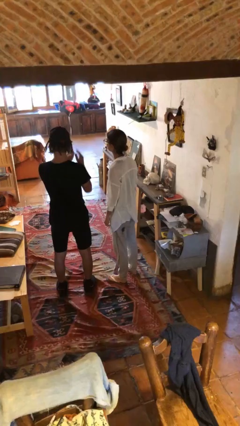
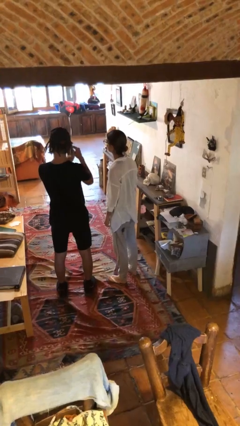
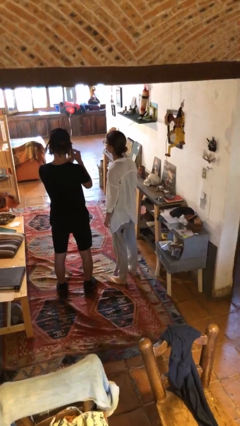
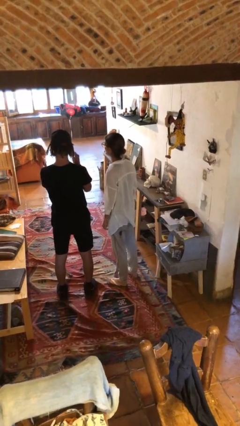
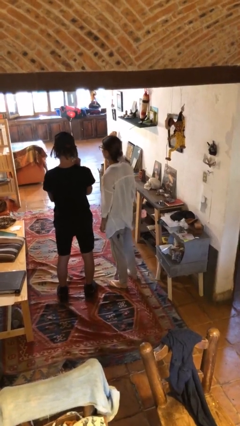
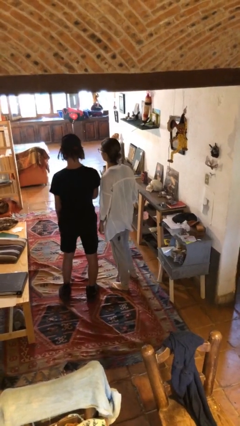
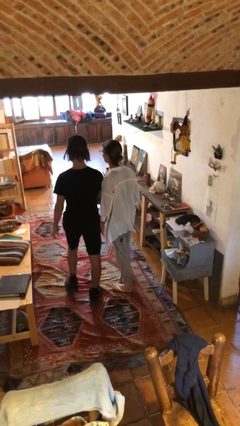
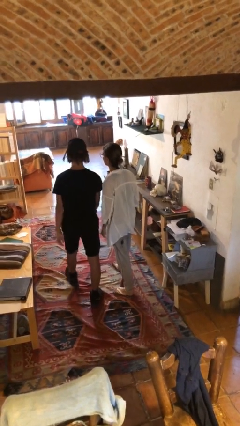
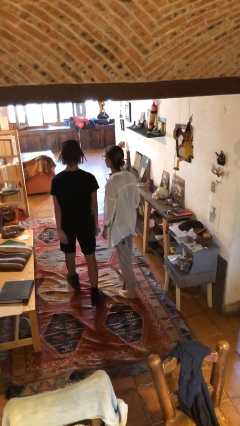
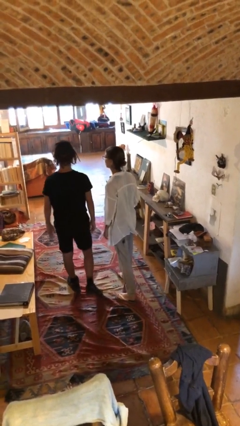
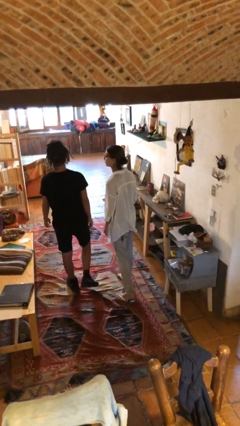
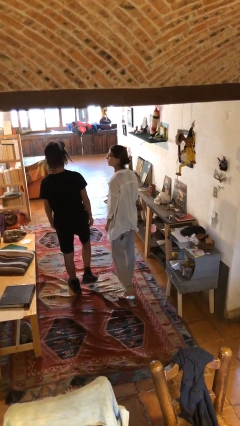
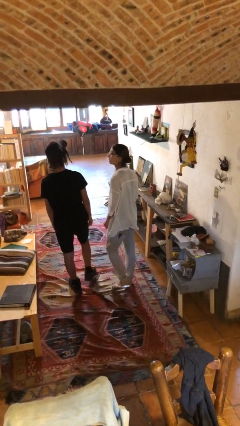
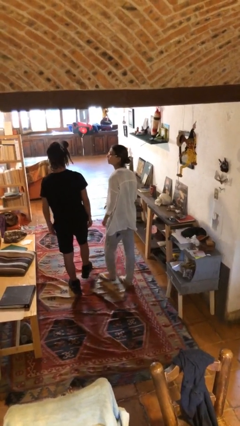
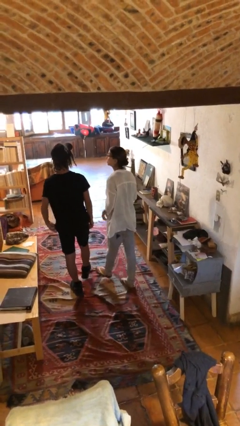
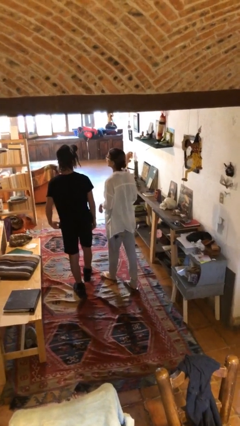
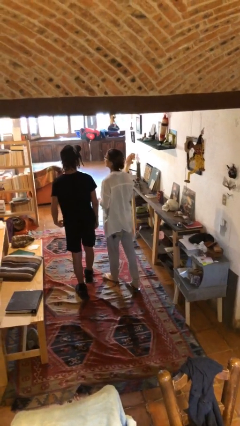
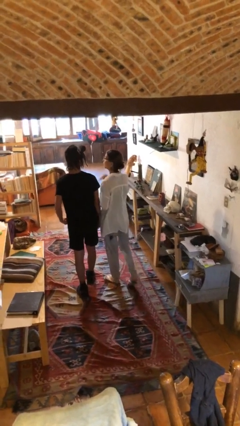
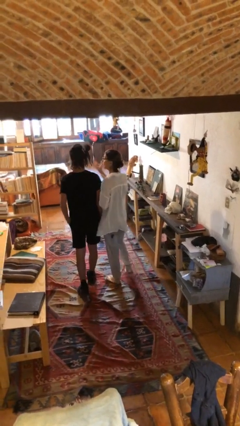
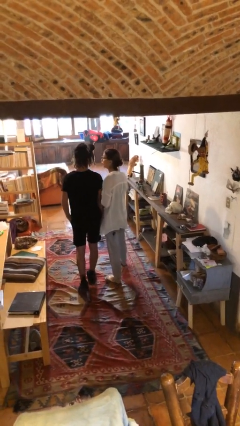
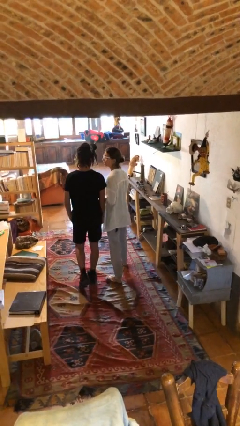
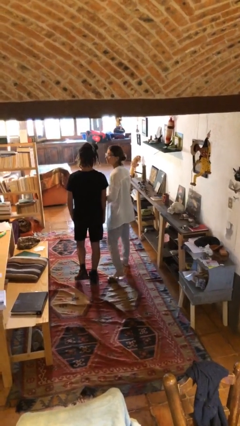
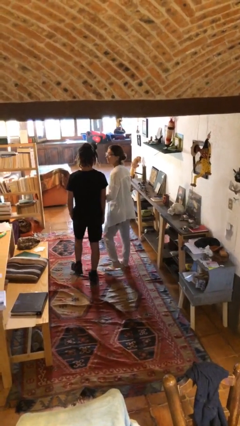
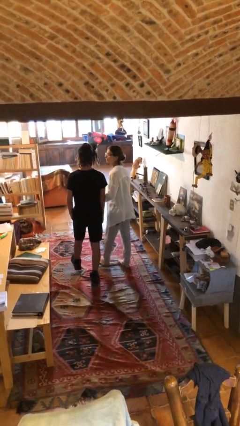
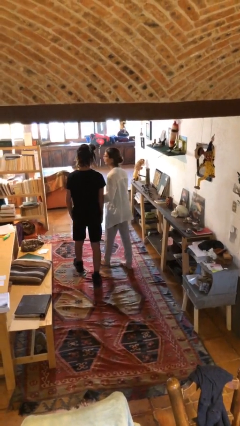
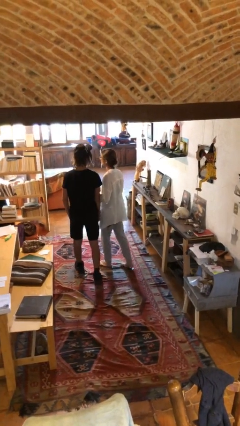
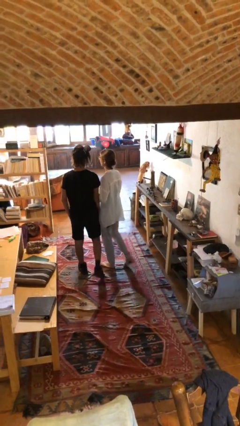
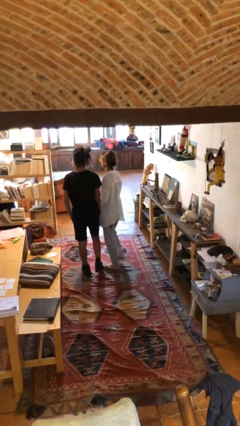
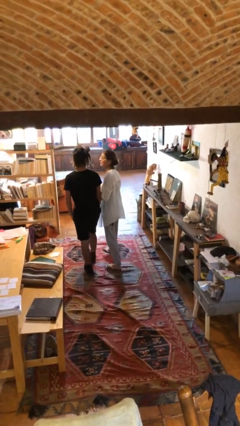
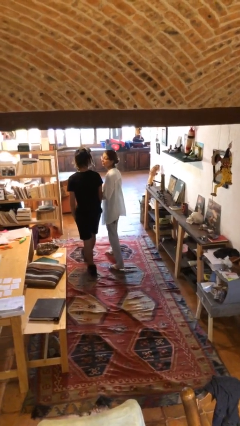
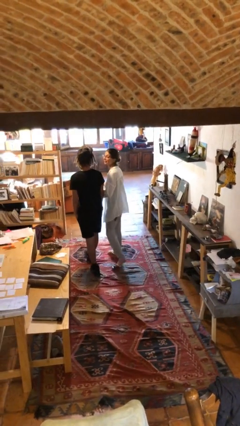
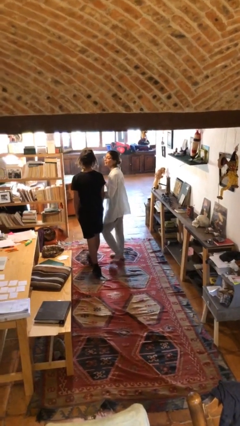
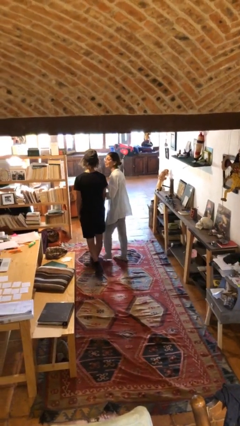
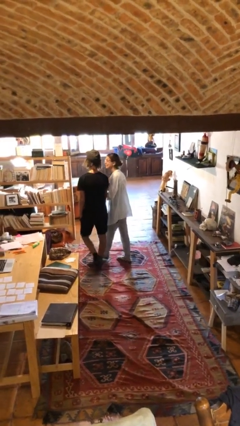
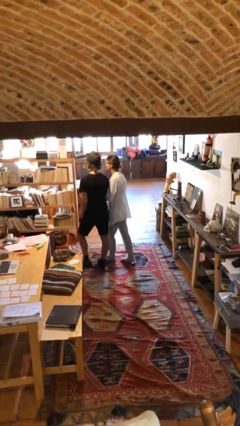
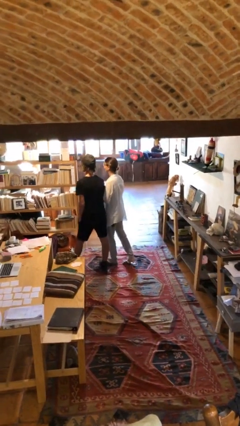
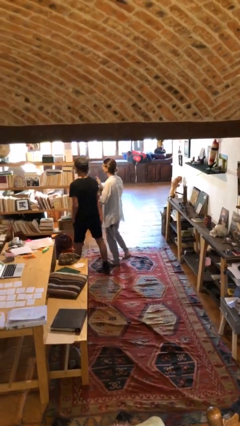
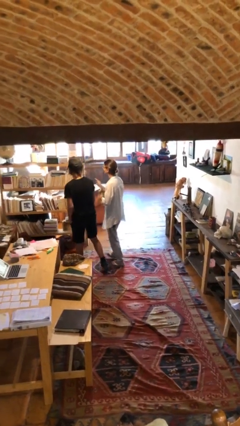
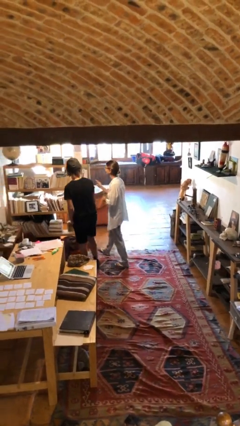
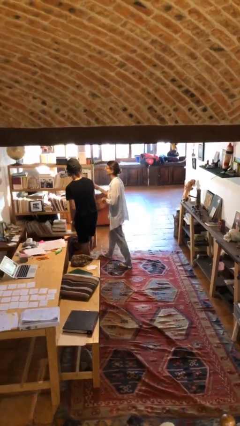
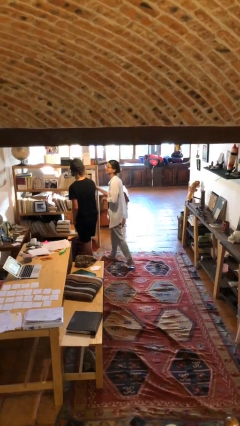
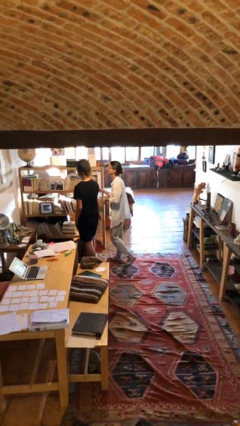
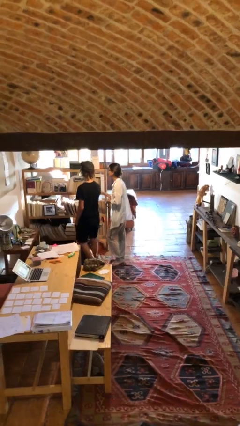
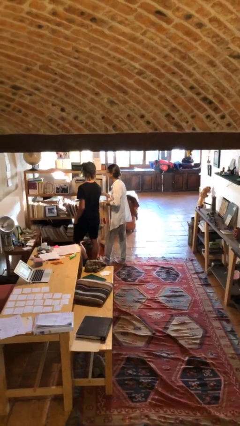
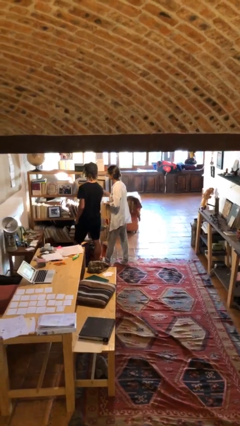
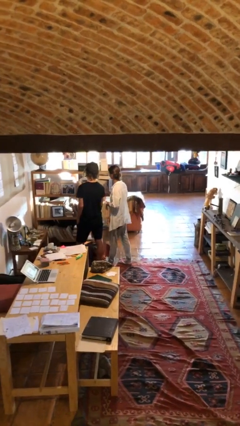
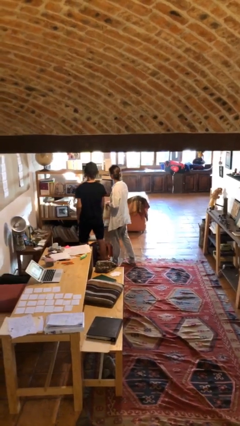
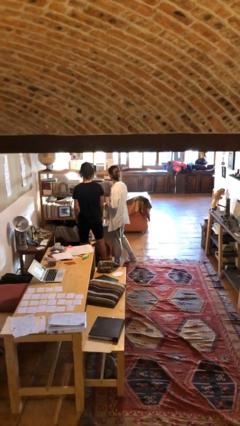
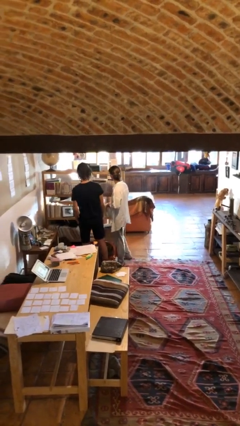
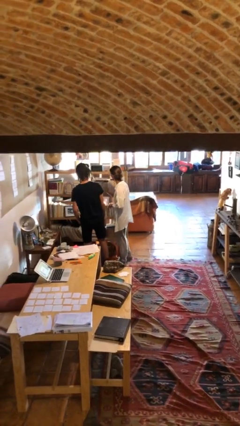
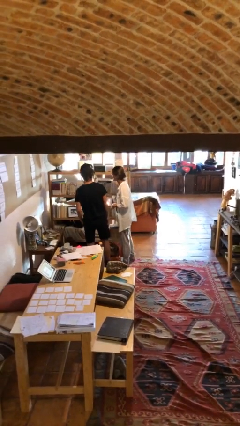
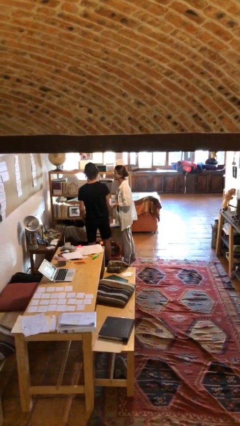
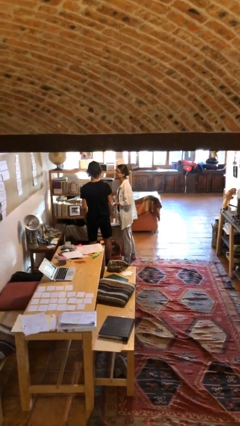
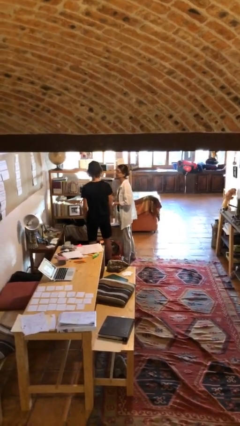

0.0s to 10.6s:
person talks to person

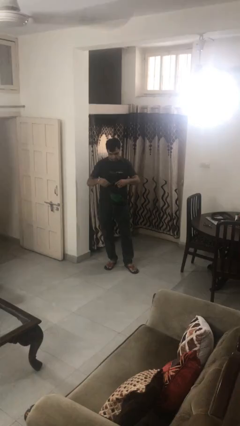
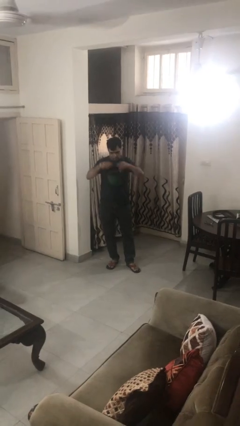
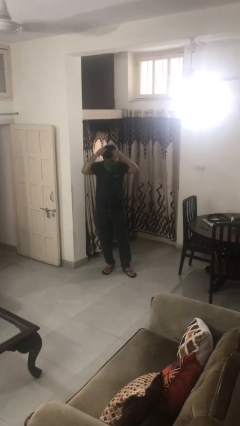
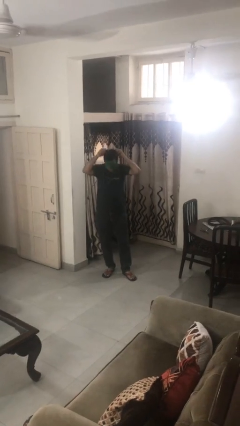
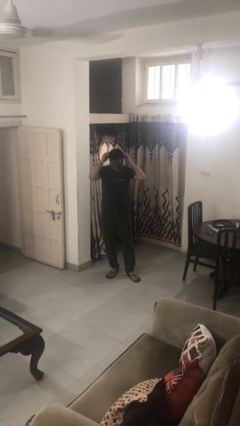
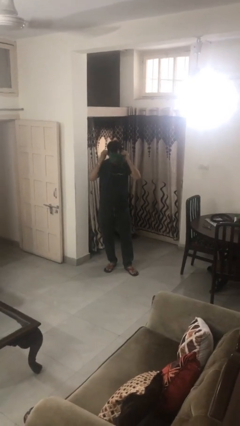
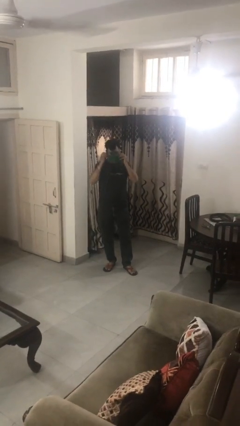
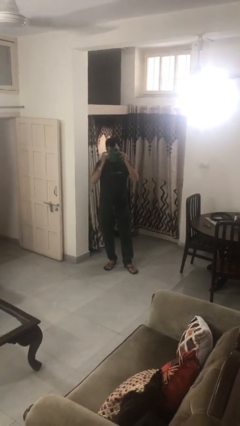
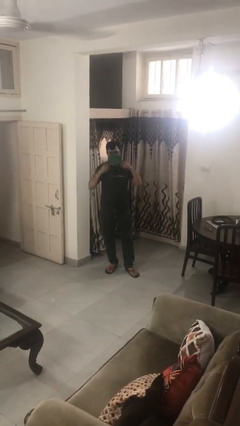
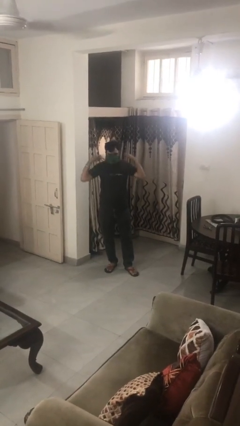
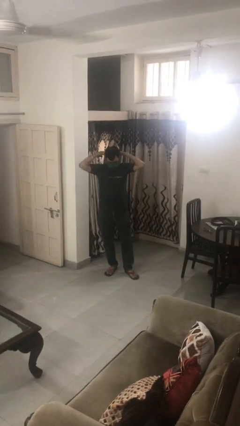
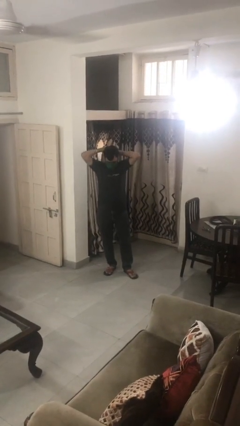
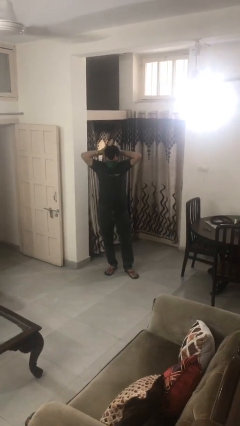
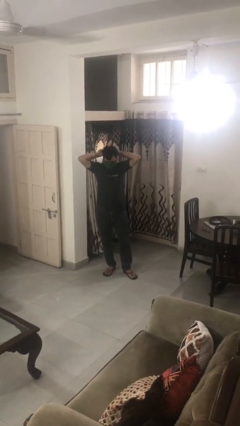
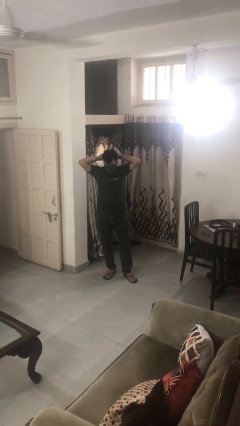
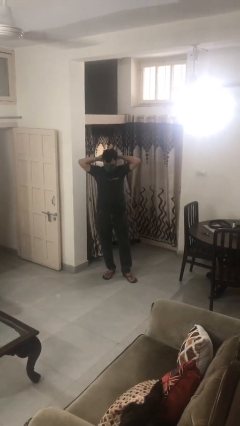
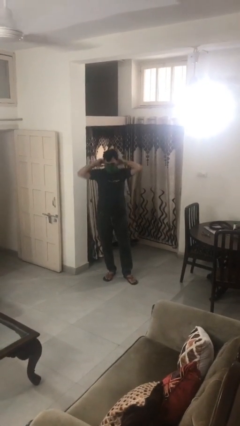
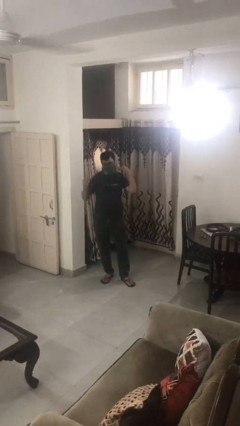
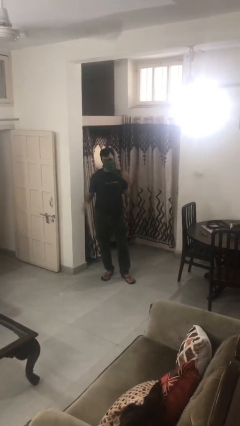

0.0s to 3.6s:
person puts on facemask

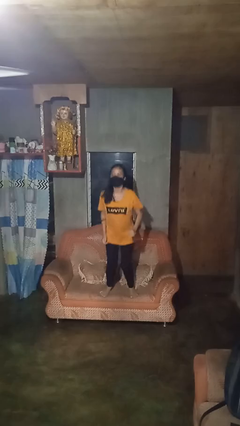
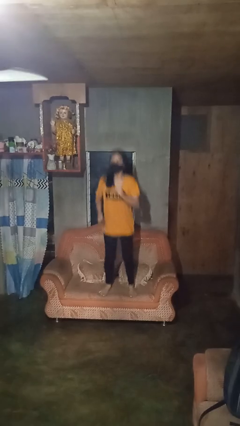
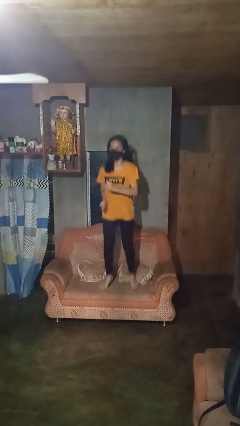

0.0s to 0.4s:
person jumps on couch

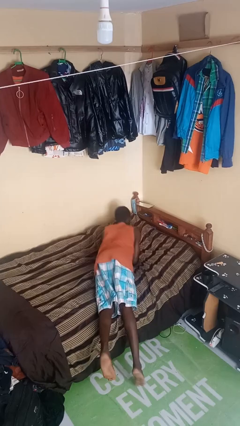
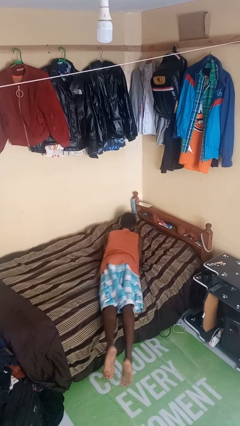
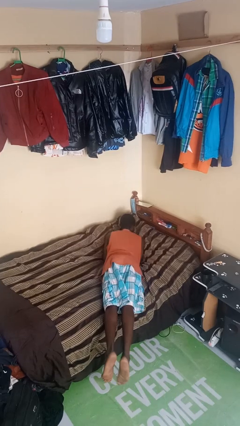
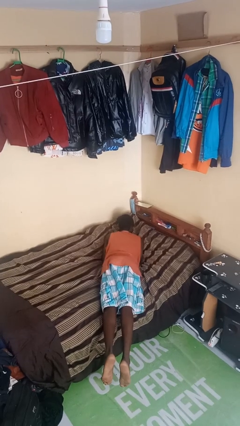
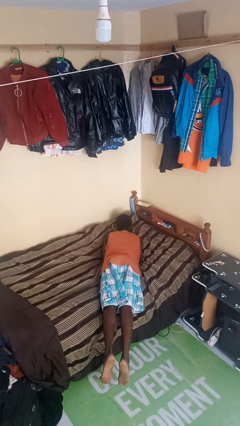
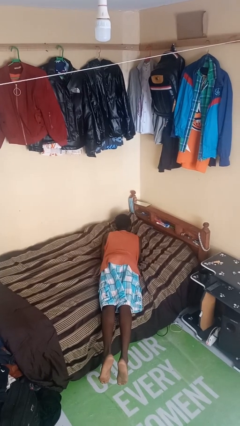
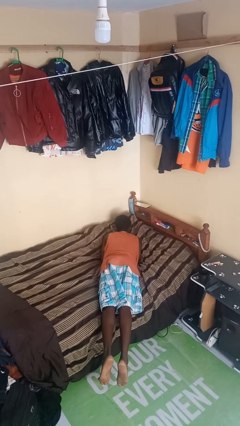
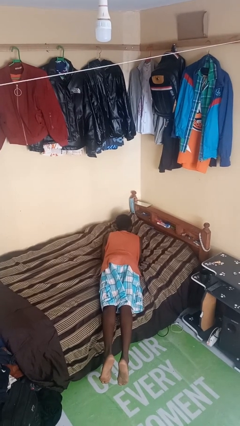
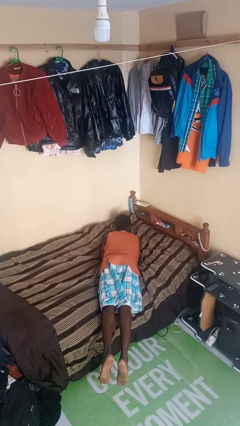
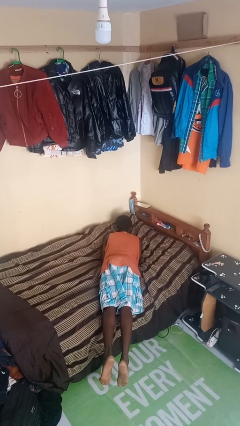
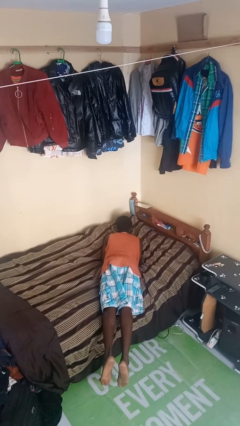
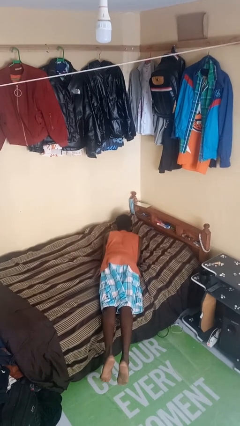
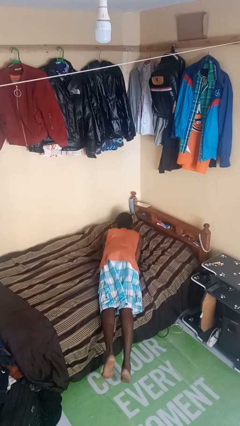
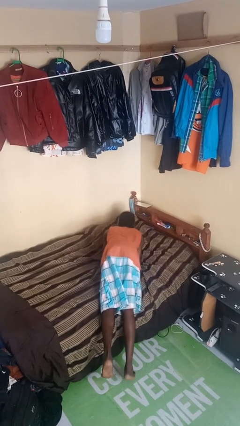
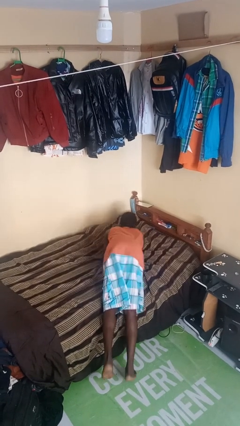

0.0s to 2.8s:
person lies down on bed

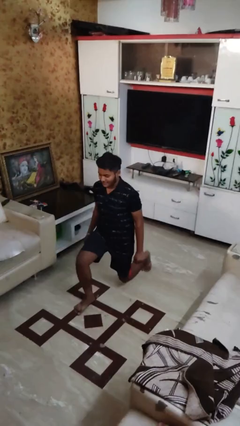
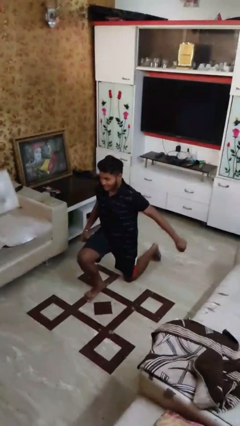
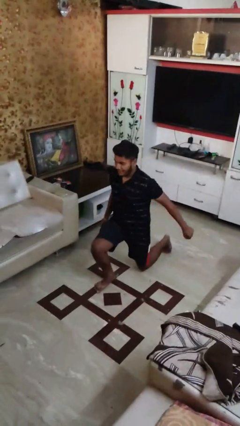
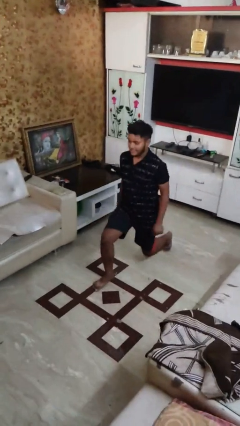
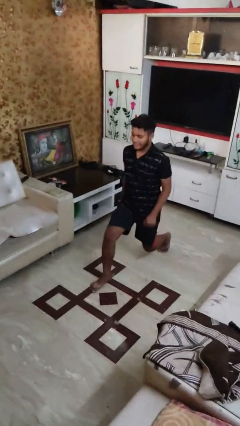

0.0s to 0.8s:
person exercises with lunges
